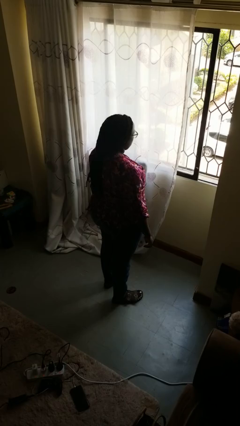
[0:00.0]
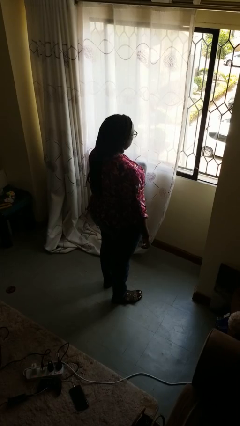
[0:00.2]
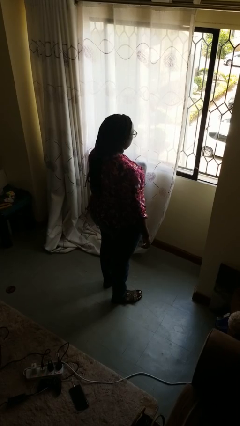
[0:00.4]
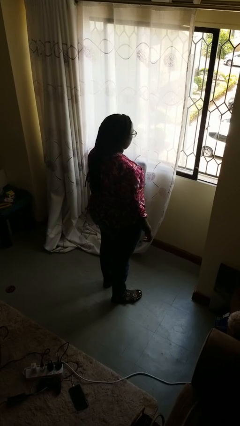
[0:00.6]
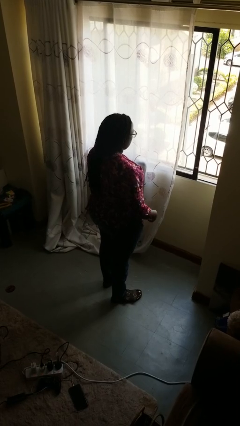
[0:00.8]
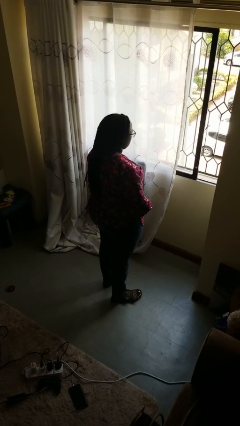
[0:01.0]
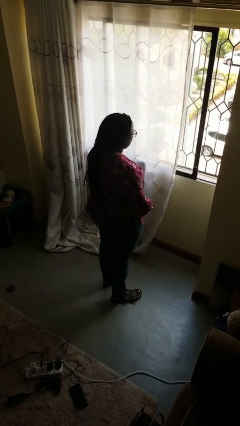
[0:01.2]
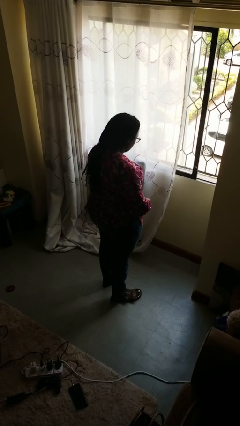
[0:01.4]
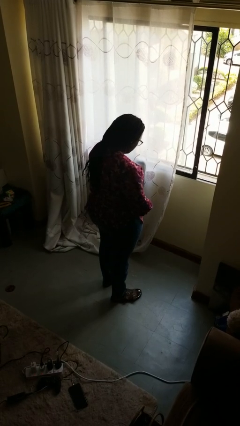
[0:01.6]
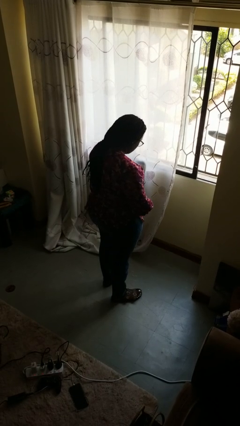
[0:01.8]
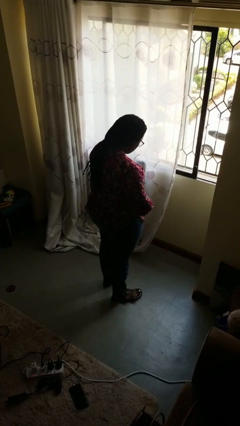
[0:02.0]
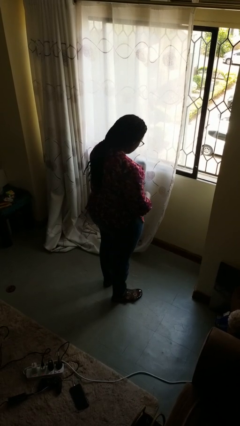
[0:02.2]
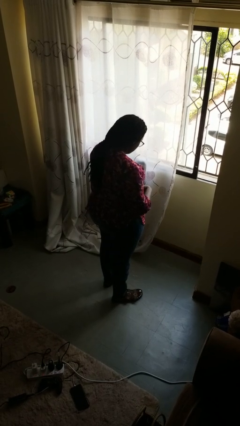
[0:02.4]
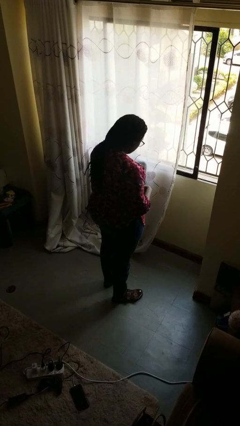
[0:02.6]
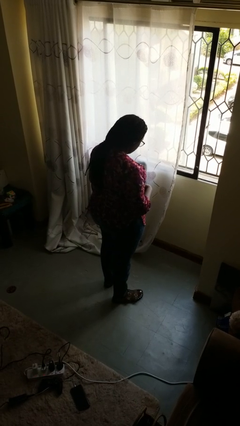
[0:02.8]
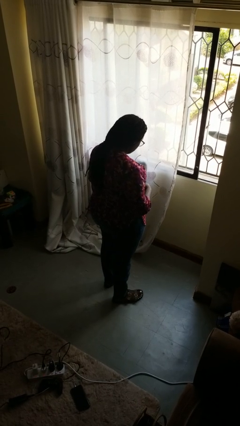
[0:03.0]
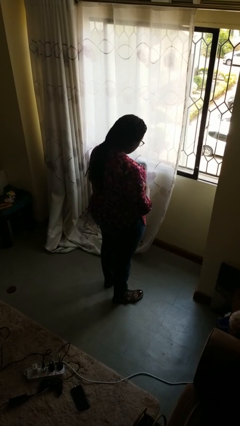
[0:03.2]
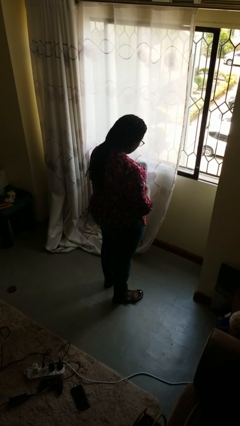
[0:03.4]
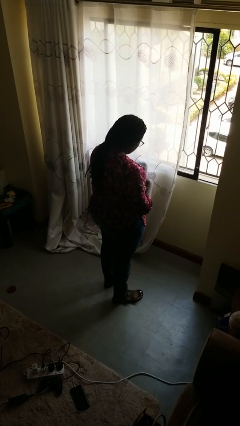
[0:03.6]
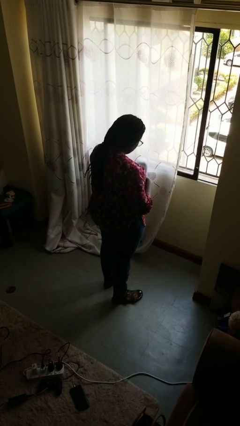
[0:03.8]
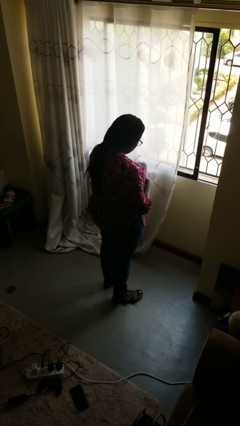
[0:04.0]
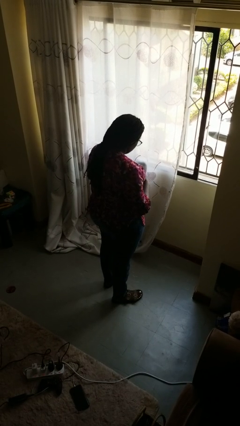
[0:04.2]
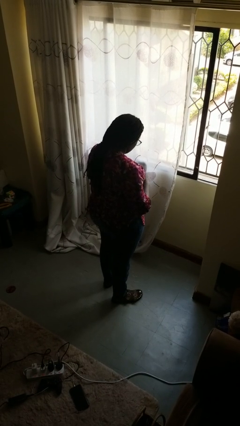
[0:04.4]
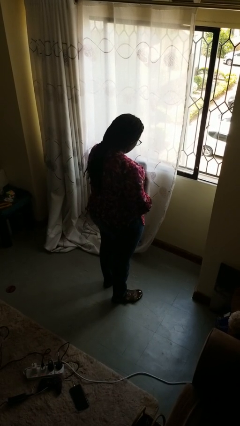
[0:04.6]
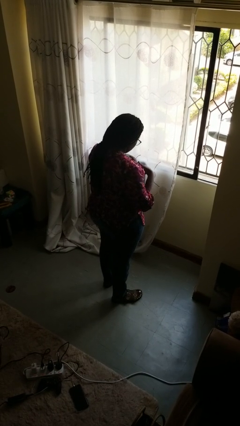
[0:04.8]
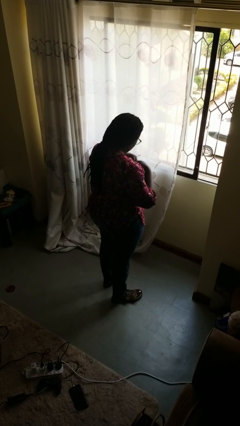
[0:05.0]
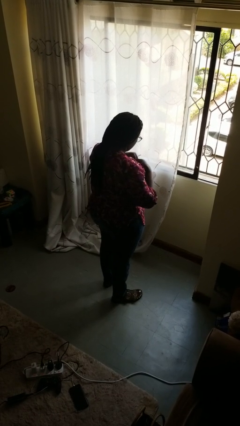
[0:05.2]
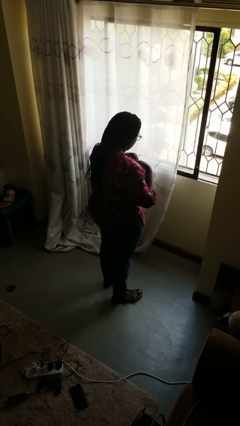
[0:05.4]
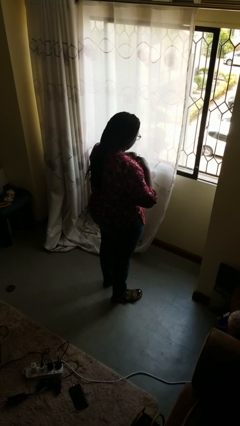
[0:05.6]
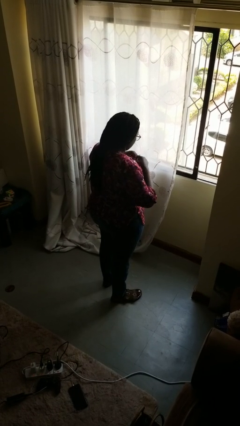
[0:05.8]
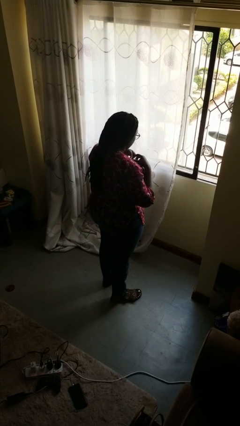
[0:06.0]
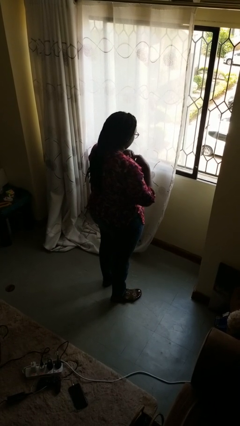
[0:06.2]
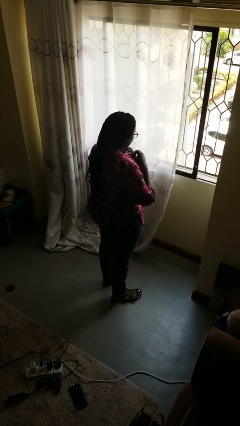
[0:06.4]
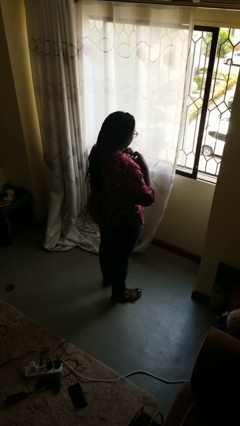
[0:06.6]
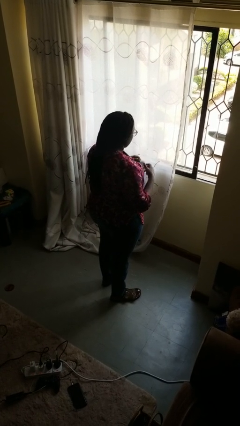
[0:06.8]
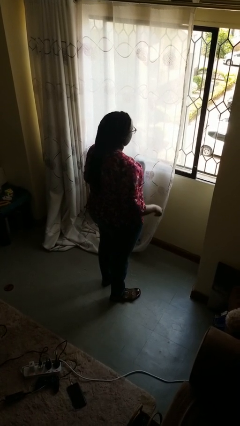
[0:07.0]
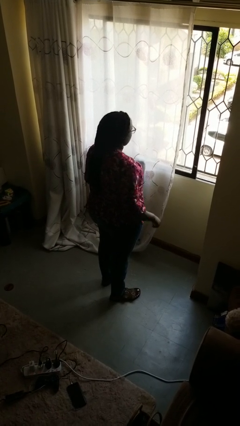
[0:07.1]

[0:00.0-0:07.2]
person buttons shirt

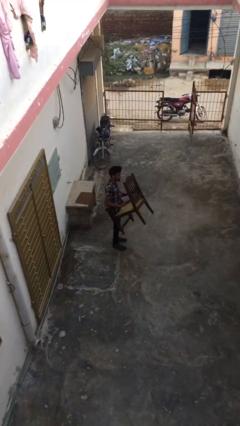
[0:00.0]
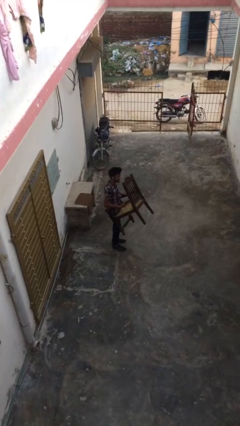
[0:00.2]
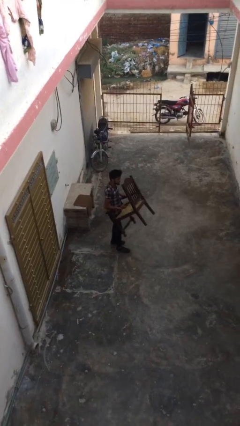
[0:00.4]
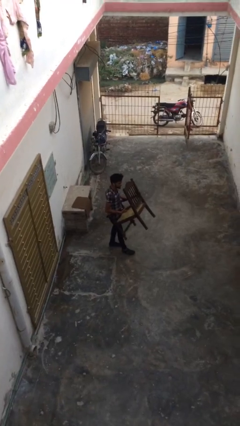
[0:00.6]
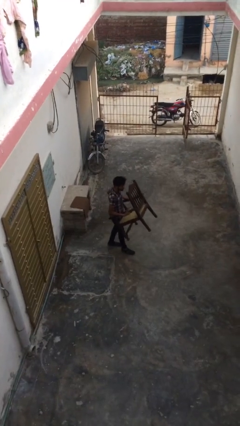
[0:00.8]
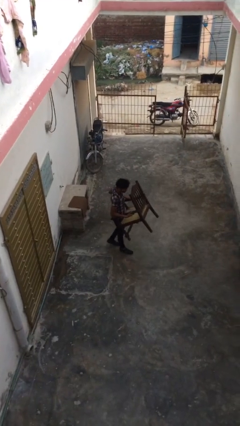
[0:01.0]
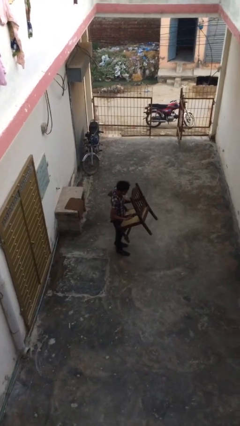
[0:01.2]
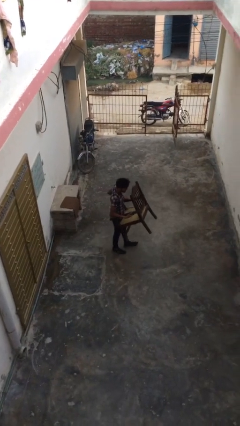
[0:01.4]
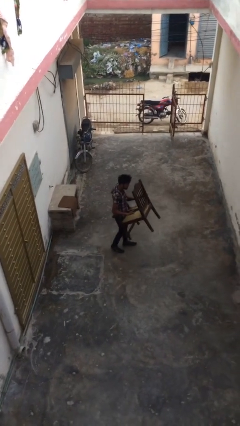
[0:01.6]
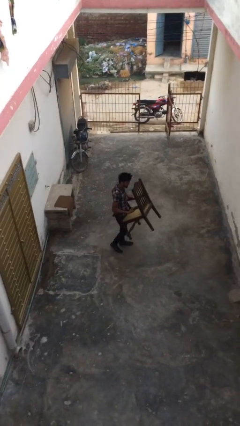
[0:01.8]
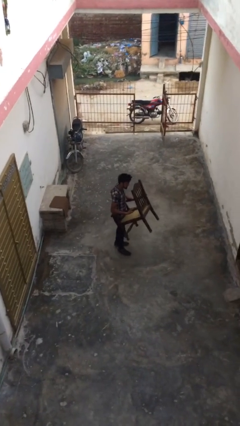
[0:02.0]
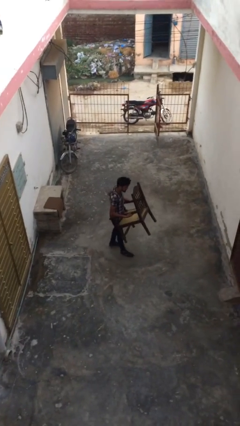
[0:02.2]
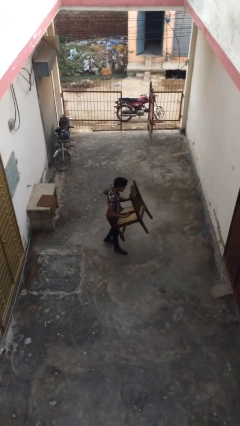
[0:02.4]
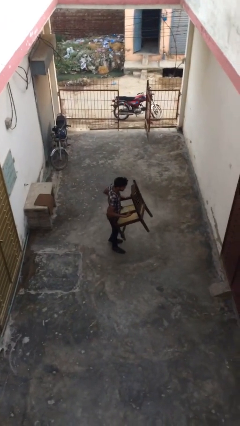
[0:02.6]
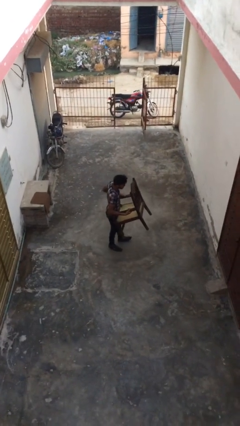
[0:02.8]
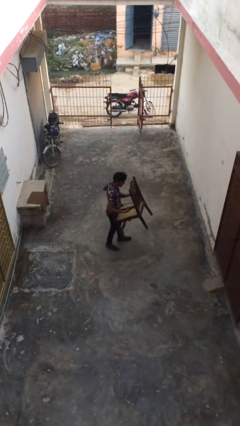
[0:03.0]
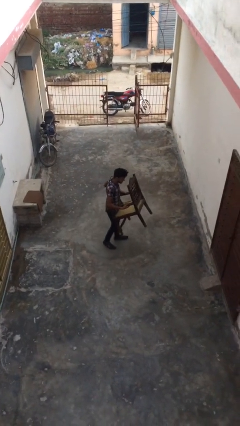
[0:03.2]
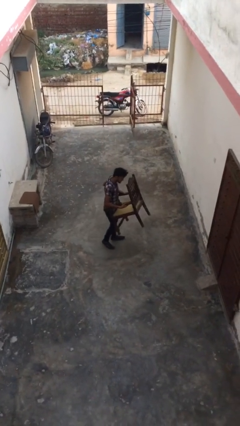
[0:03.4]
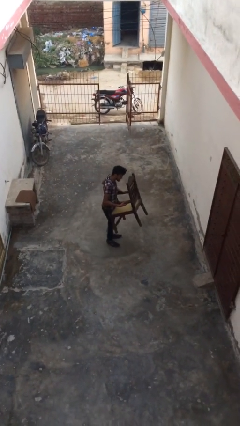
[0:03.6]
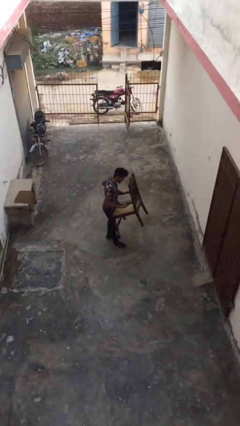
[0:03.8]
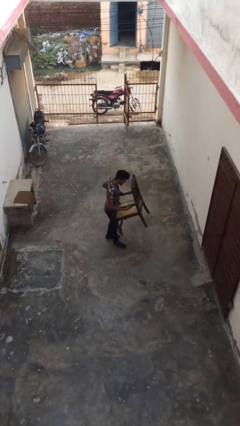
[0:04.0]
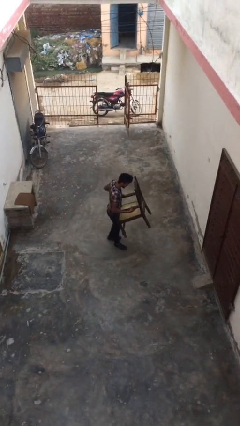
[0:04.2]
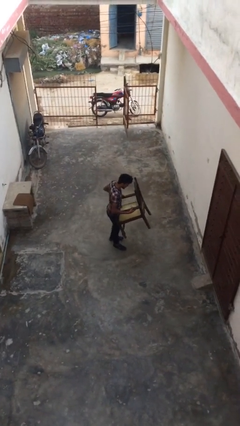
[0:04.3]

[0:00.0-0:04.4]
person carries heavy object

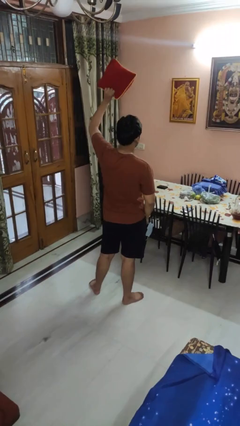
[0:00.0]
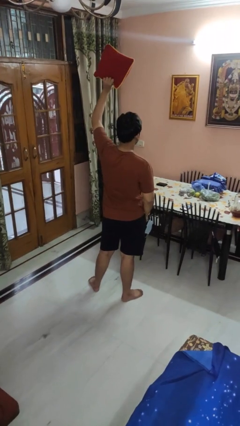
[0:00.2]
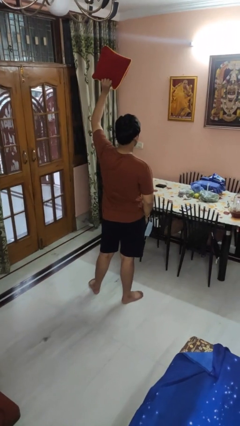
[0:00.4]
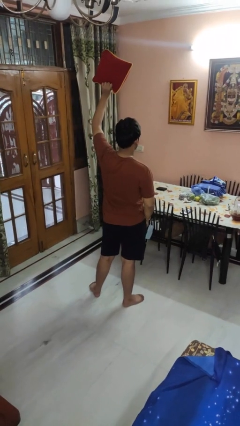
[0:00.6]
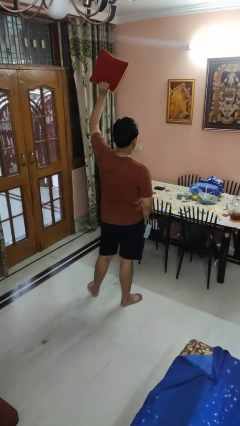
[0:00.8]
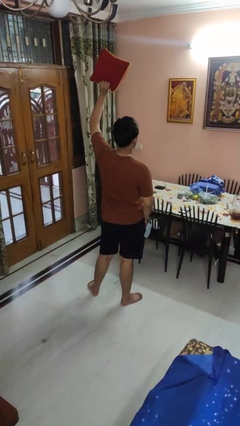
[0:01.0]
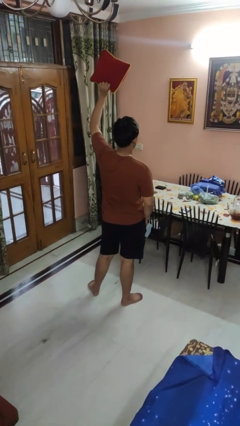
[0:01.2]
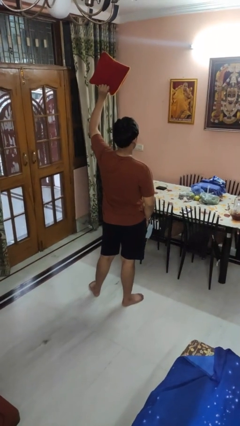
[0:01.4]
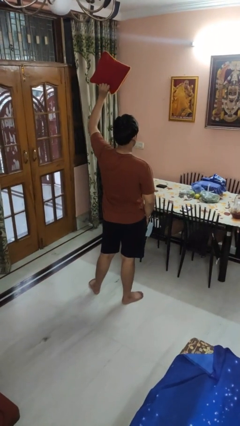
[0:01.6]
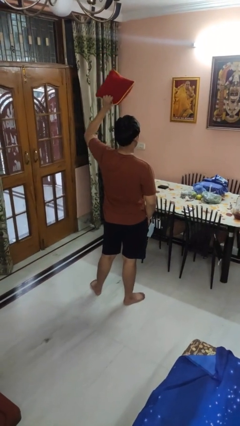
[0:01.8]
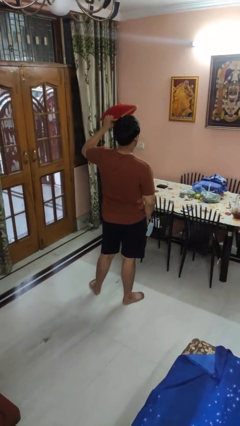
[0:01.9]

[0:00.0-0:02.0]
person holds object above head

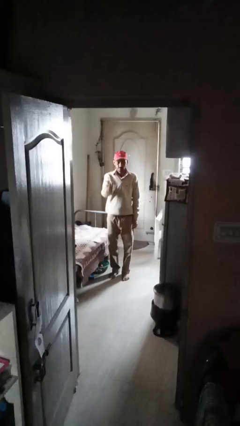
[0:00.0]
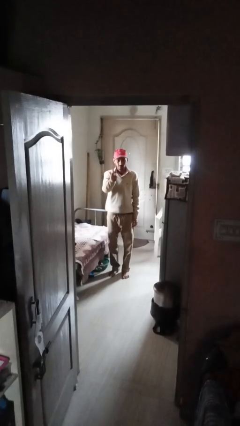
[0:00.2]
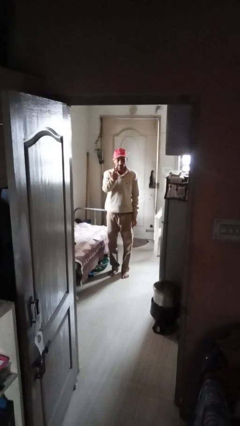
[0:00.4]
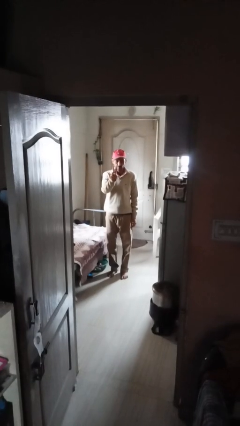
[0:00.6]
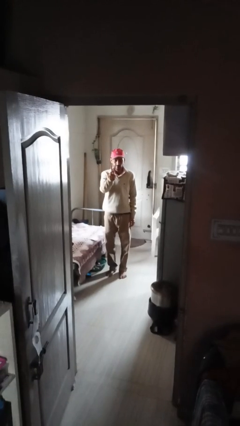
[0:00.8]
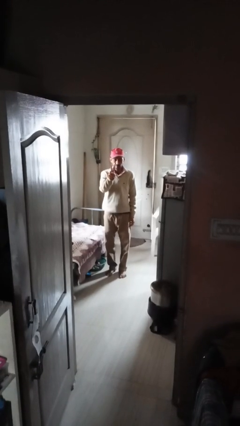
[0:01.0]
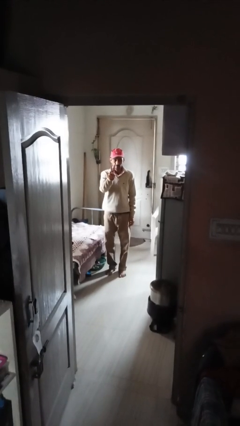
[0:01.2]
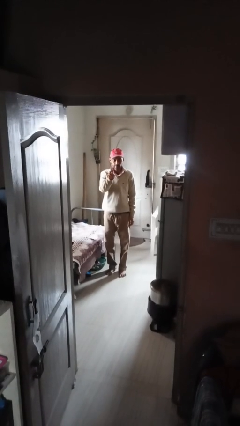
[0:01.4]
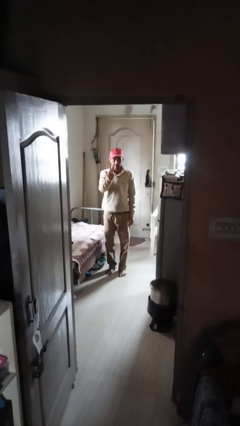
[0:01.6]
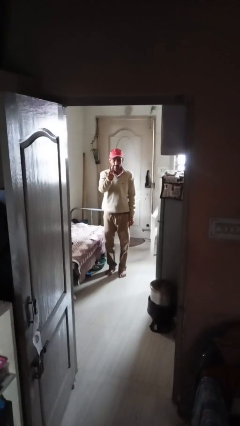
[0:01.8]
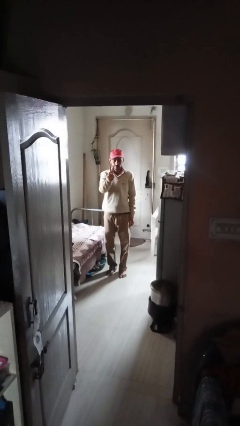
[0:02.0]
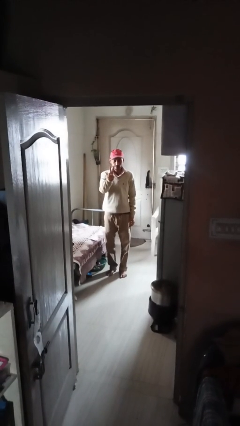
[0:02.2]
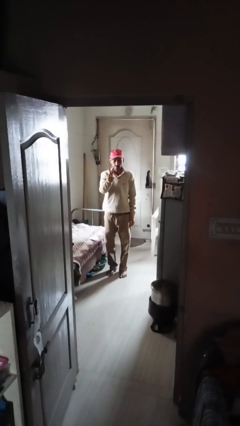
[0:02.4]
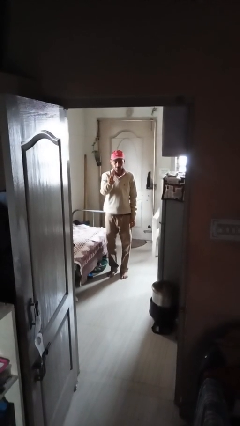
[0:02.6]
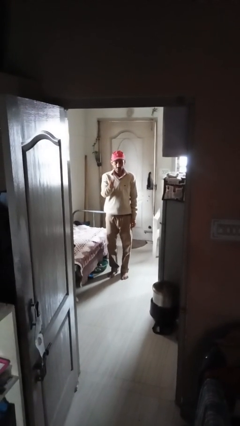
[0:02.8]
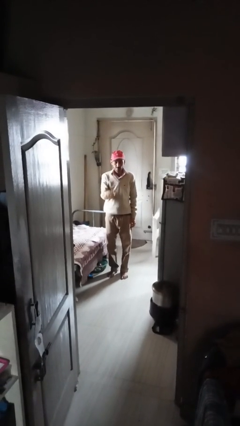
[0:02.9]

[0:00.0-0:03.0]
person gestures peace

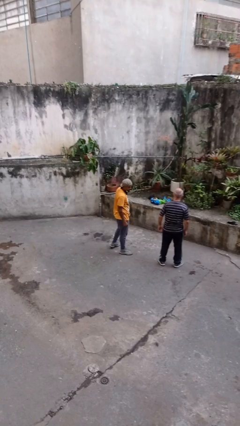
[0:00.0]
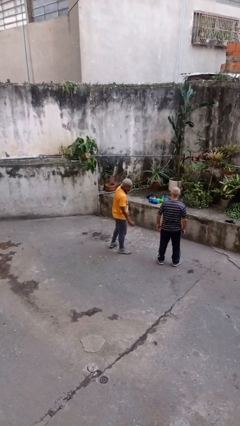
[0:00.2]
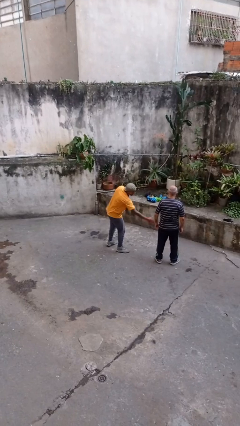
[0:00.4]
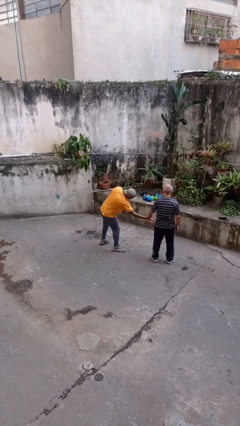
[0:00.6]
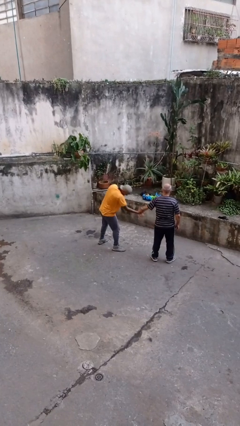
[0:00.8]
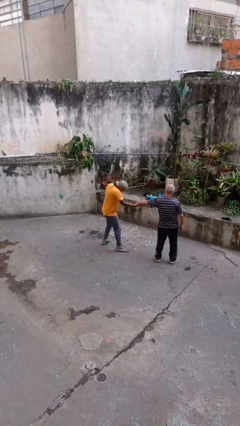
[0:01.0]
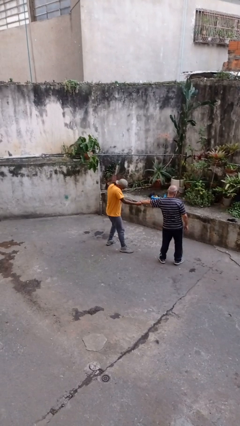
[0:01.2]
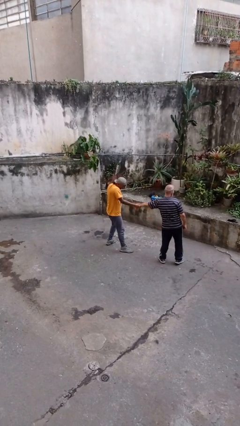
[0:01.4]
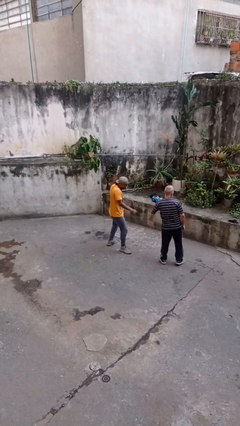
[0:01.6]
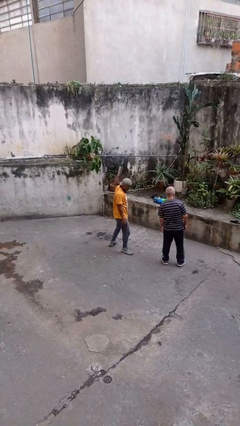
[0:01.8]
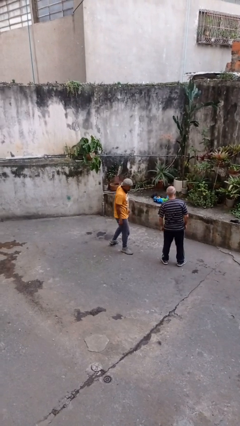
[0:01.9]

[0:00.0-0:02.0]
person grabs person by forearm
